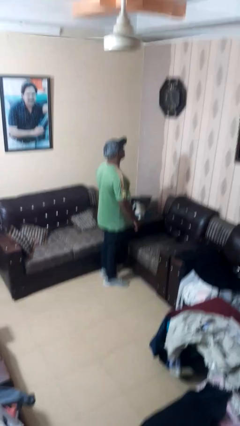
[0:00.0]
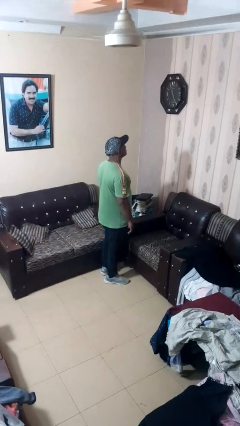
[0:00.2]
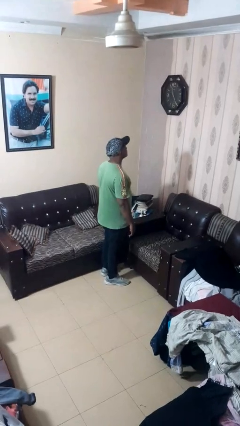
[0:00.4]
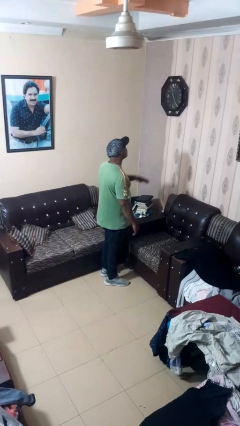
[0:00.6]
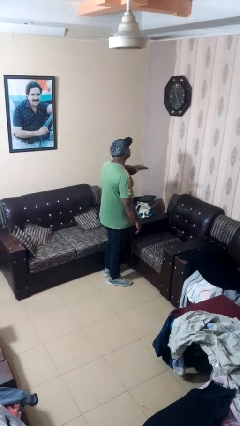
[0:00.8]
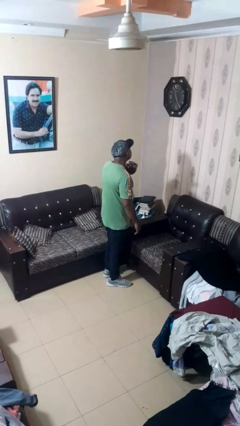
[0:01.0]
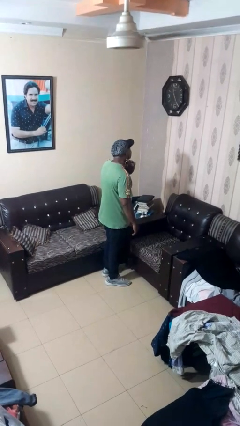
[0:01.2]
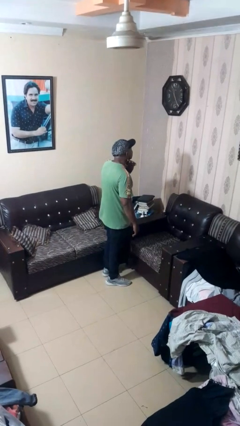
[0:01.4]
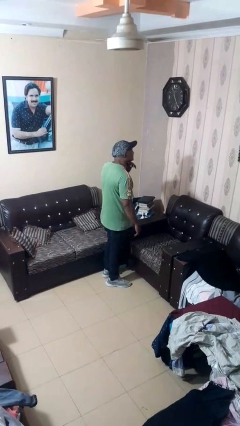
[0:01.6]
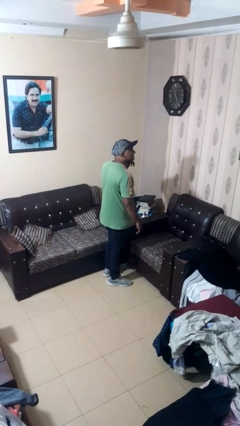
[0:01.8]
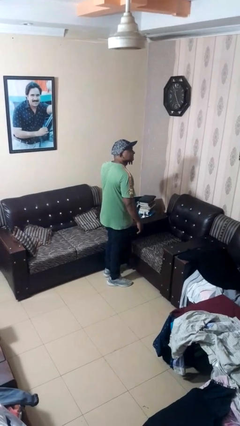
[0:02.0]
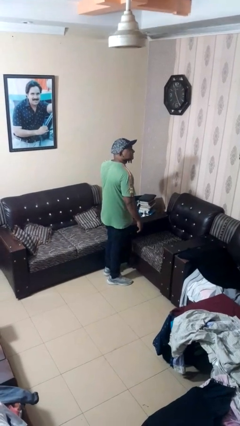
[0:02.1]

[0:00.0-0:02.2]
person gestures cut

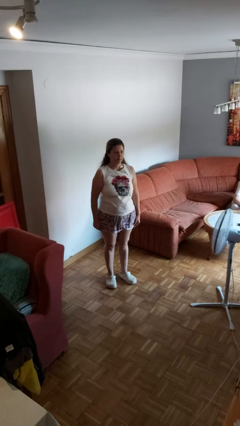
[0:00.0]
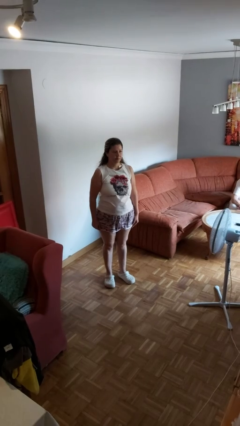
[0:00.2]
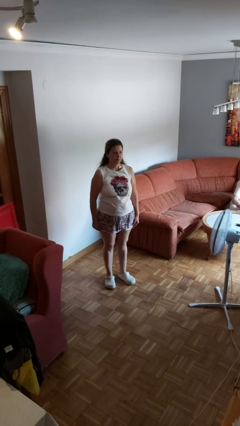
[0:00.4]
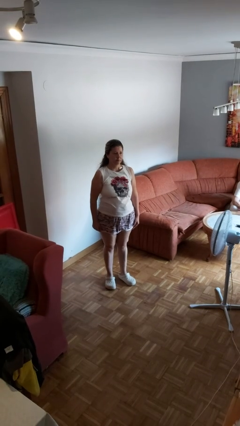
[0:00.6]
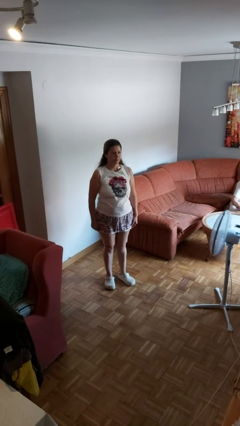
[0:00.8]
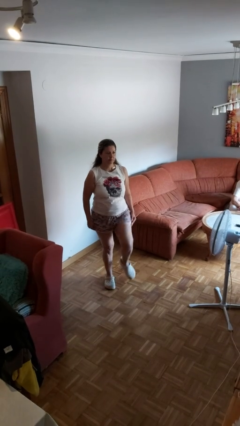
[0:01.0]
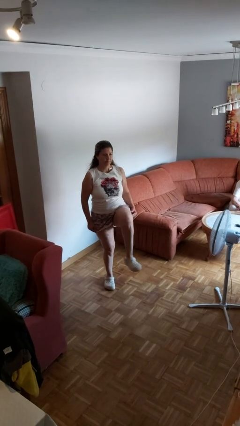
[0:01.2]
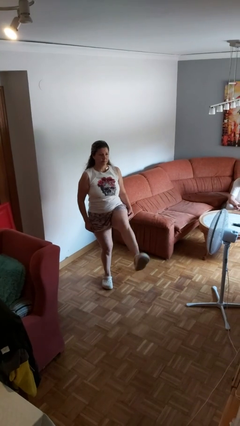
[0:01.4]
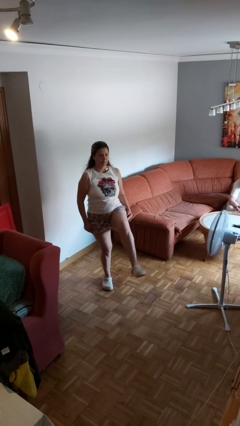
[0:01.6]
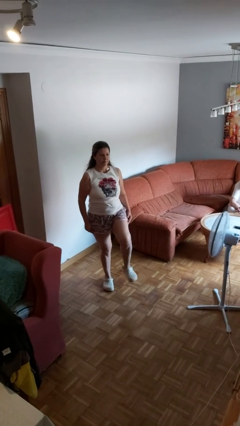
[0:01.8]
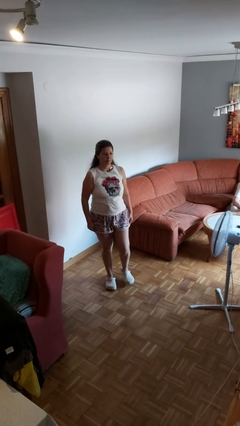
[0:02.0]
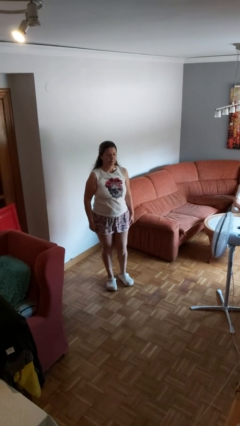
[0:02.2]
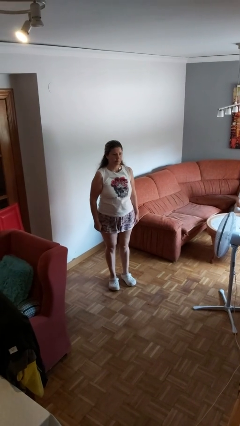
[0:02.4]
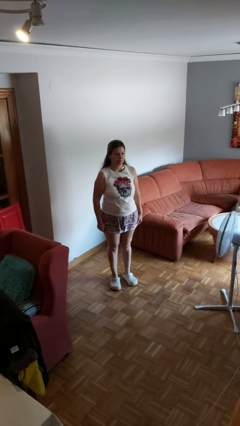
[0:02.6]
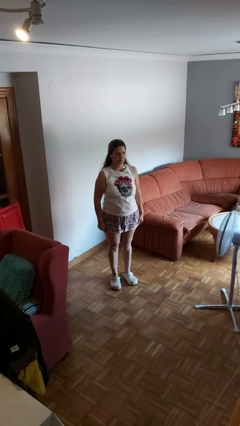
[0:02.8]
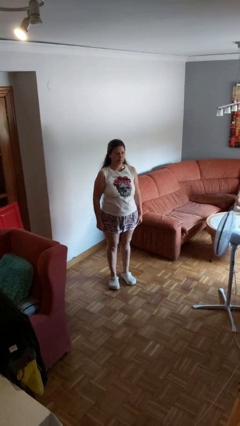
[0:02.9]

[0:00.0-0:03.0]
person karate kicks

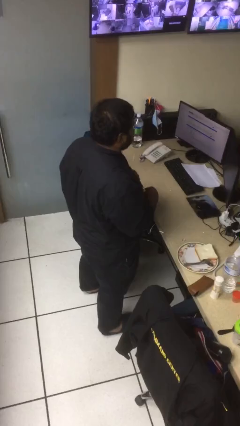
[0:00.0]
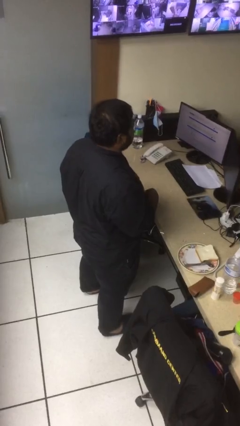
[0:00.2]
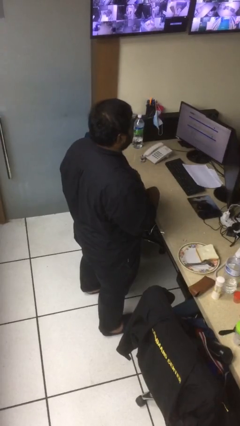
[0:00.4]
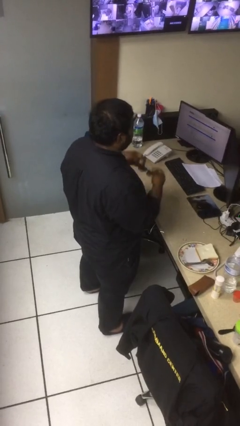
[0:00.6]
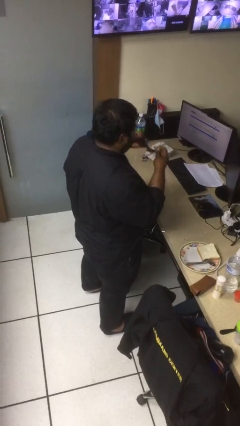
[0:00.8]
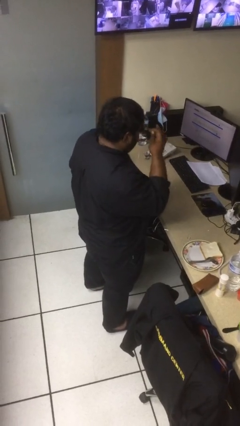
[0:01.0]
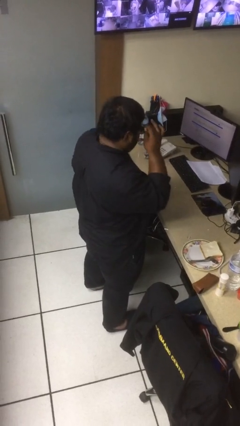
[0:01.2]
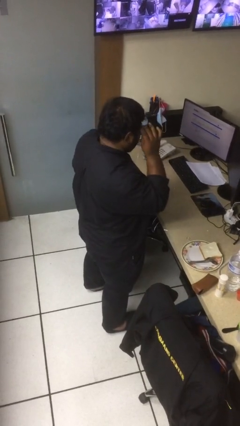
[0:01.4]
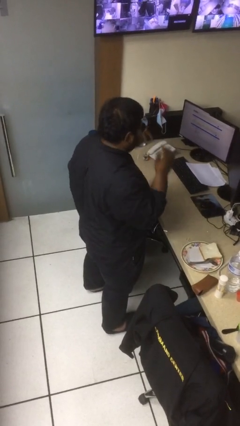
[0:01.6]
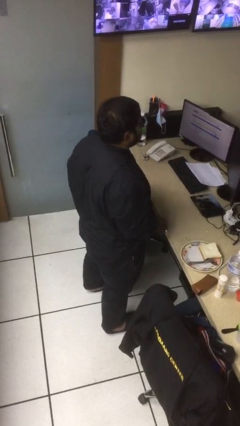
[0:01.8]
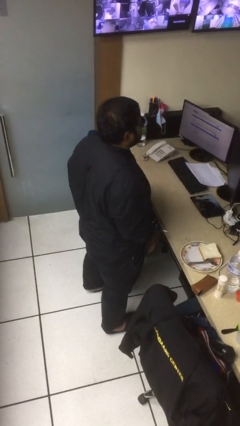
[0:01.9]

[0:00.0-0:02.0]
person puts on sunglasses

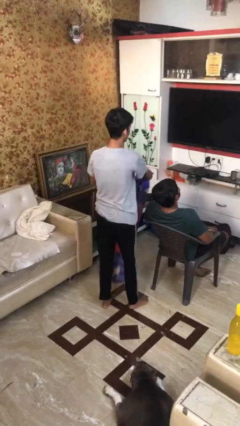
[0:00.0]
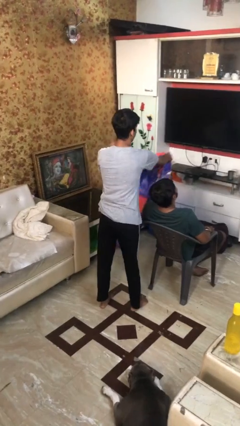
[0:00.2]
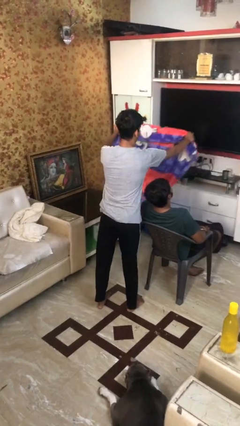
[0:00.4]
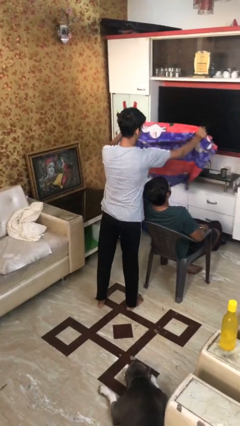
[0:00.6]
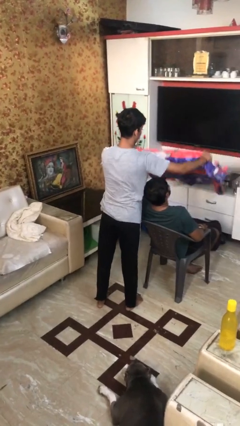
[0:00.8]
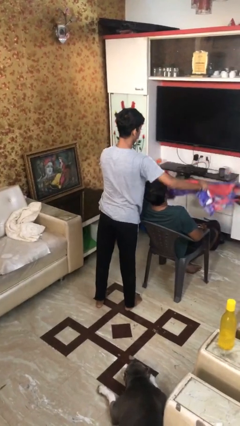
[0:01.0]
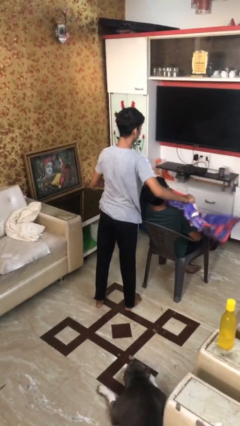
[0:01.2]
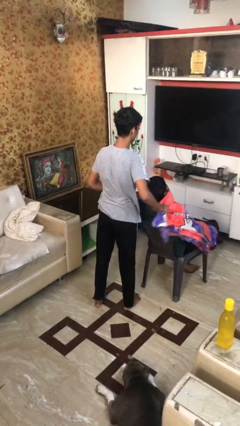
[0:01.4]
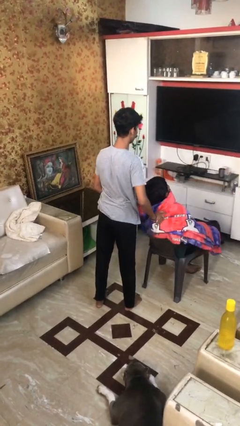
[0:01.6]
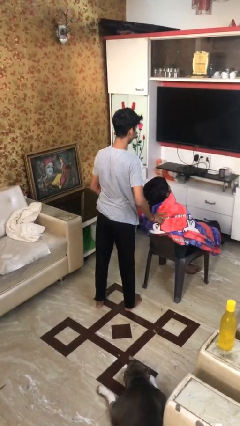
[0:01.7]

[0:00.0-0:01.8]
person covers friend with blanket

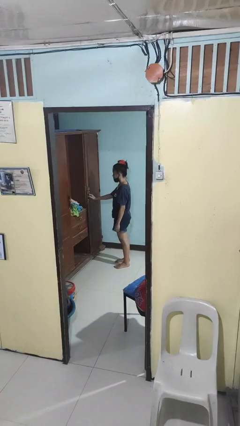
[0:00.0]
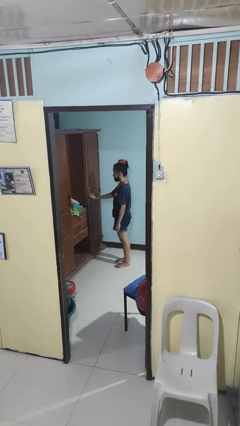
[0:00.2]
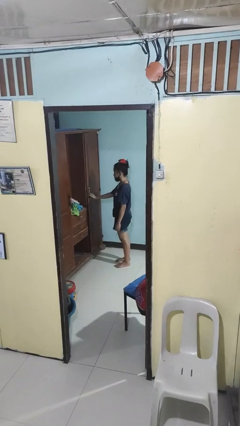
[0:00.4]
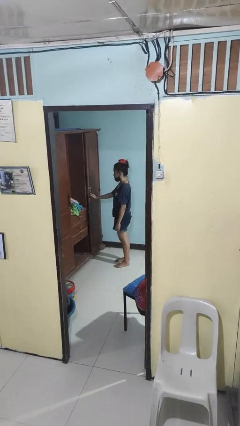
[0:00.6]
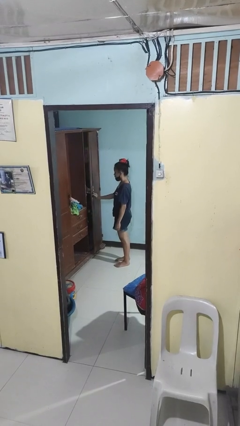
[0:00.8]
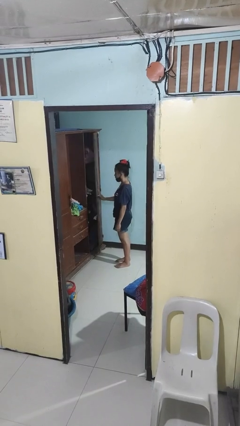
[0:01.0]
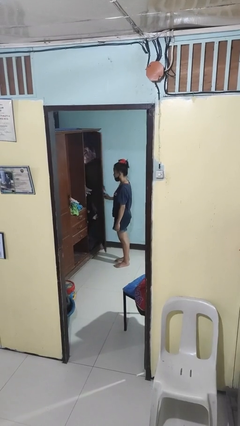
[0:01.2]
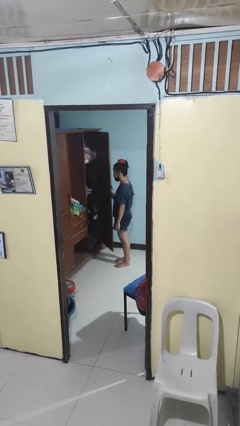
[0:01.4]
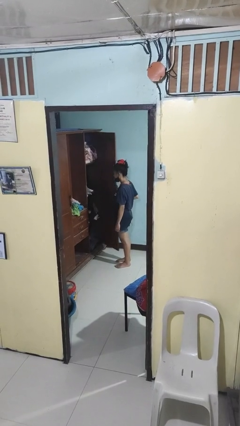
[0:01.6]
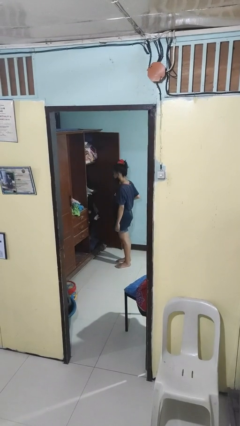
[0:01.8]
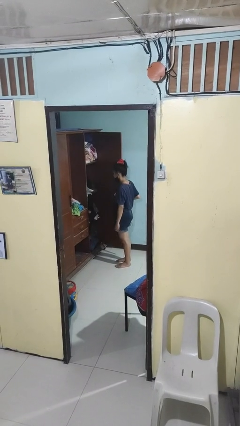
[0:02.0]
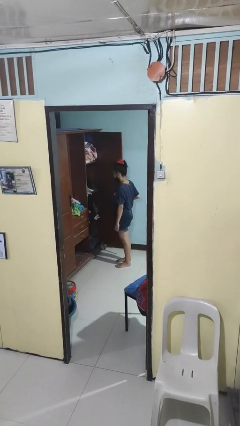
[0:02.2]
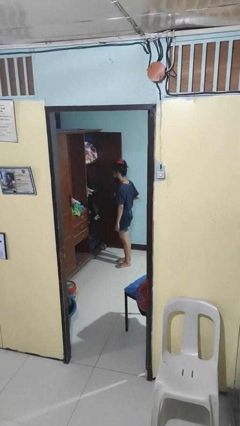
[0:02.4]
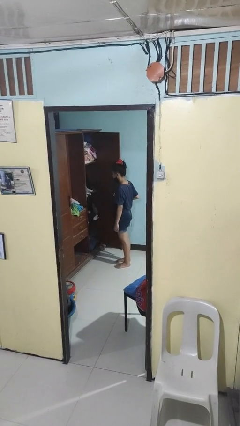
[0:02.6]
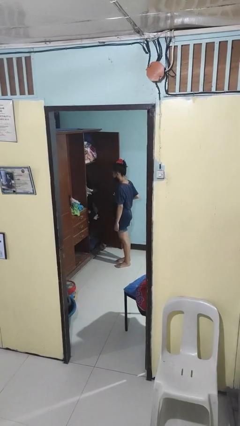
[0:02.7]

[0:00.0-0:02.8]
person opens closet door

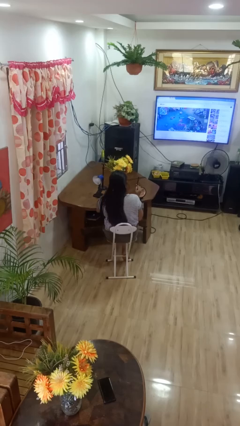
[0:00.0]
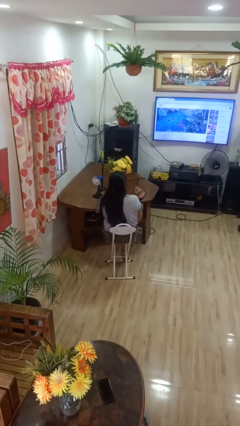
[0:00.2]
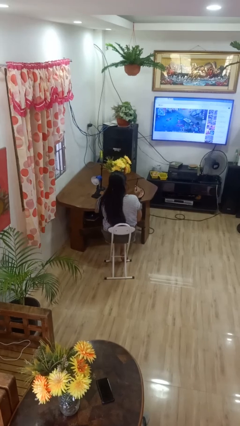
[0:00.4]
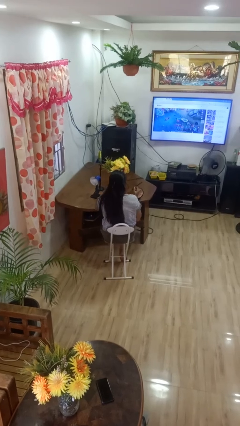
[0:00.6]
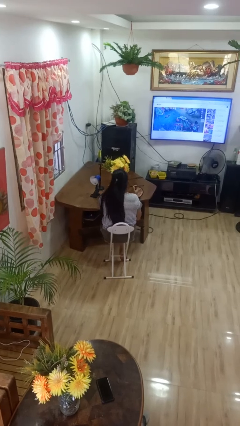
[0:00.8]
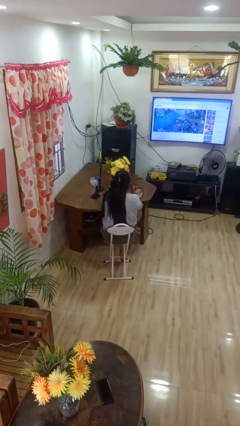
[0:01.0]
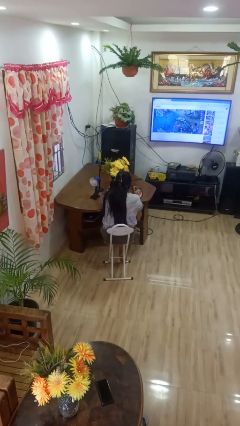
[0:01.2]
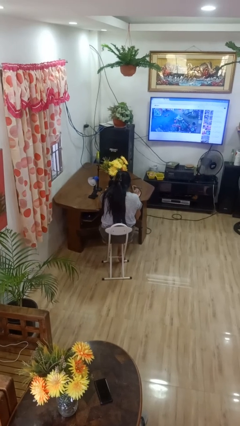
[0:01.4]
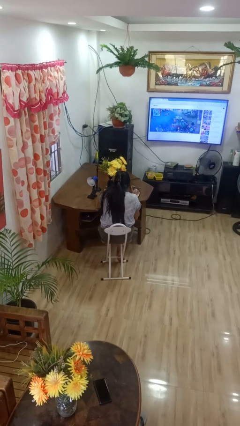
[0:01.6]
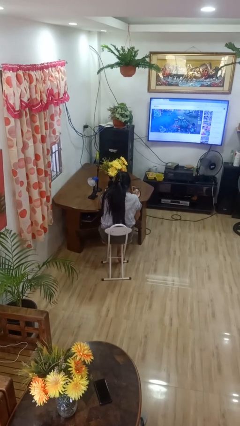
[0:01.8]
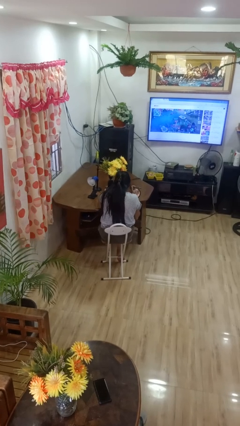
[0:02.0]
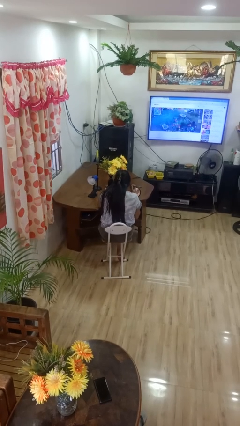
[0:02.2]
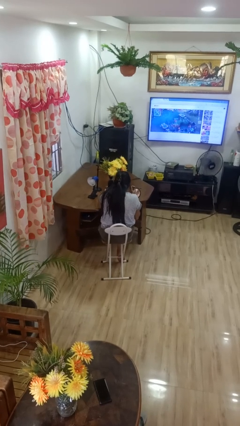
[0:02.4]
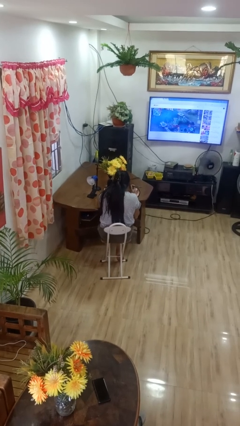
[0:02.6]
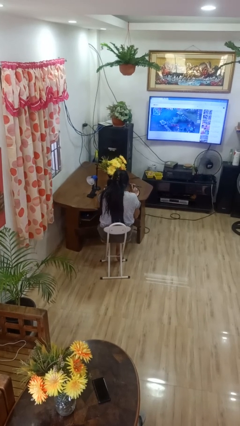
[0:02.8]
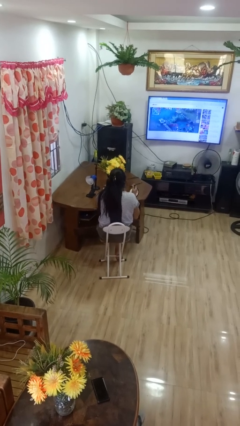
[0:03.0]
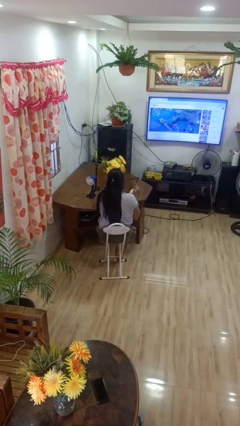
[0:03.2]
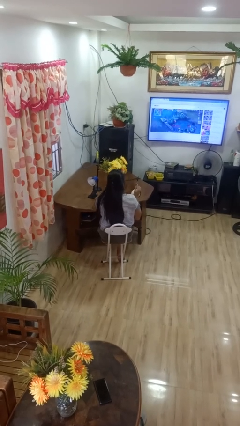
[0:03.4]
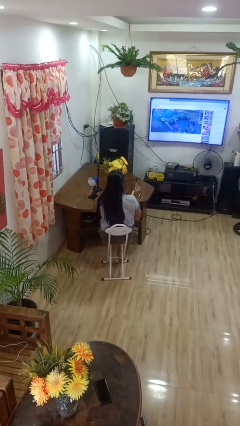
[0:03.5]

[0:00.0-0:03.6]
person applies eye makeup

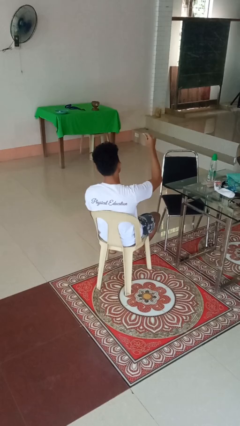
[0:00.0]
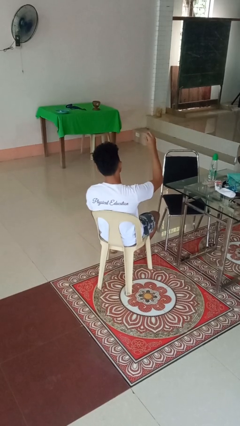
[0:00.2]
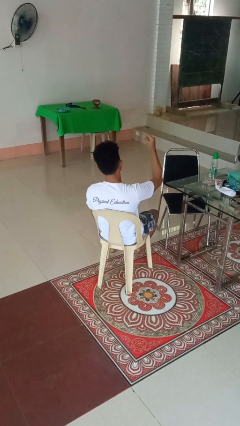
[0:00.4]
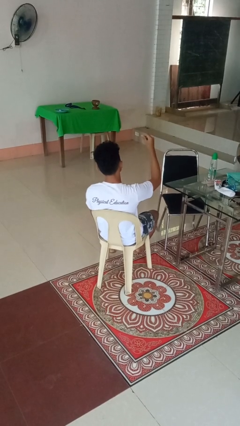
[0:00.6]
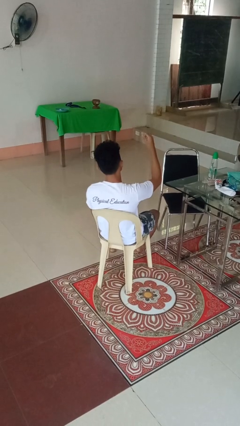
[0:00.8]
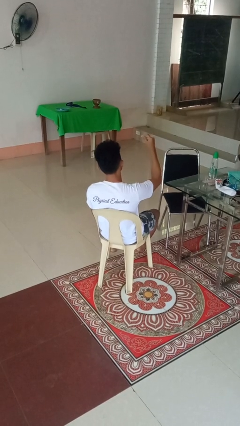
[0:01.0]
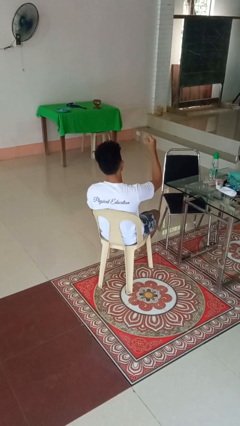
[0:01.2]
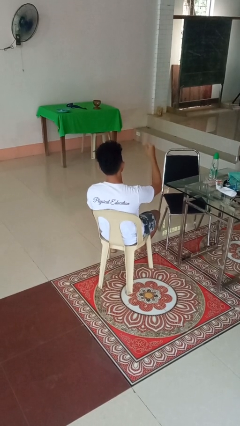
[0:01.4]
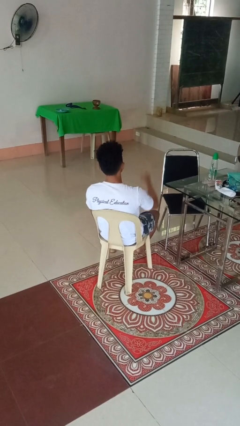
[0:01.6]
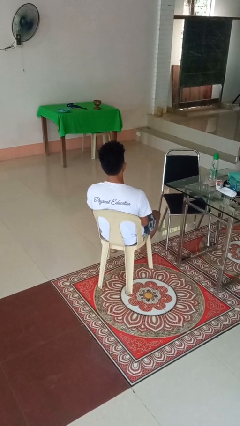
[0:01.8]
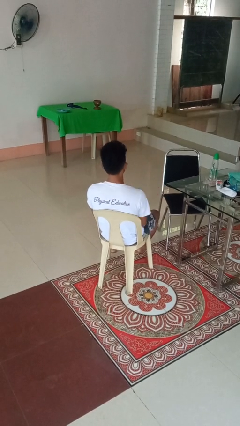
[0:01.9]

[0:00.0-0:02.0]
person snaps fingers
